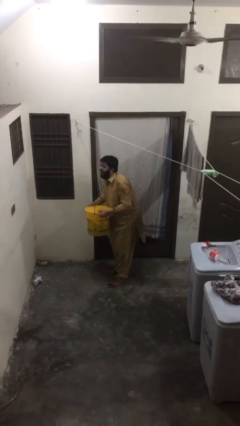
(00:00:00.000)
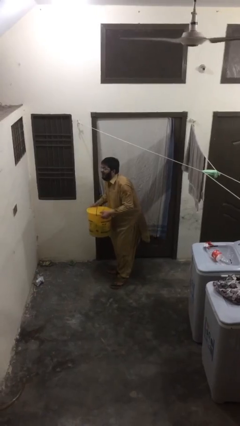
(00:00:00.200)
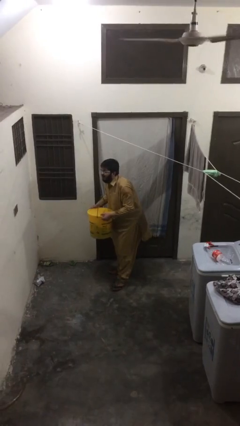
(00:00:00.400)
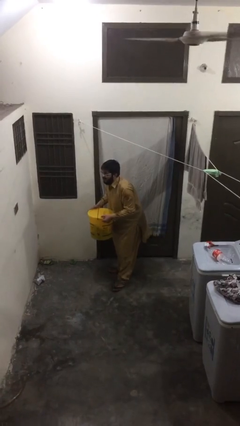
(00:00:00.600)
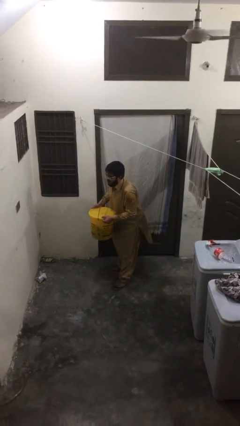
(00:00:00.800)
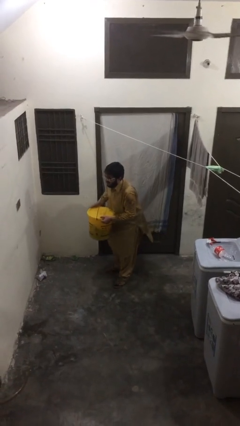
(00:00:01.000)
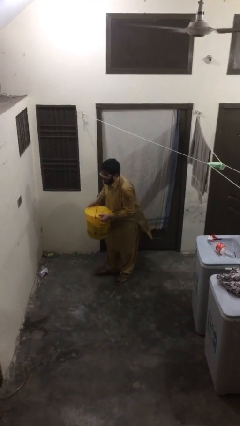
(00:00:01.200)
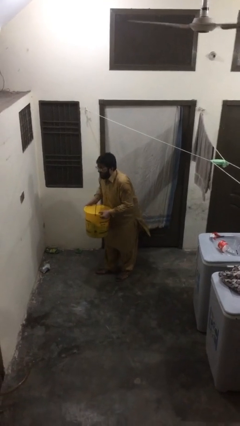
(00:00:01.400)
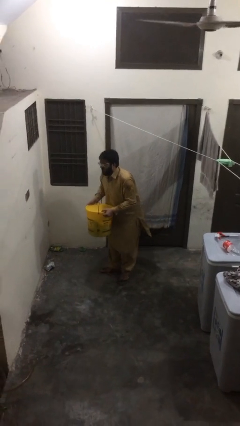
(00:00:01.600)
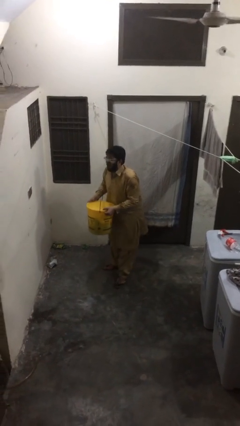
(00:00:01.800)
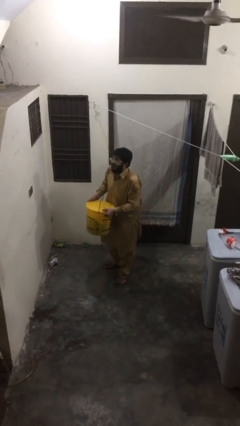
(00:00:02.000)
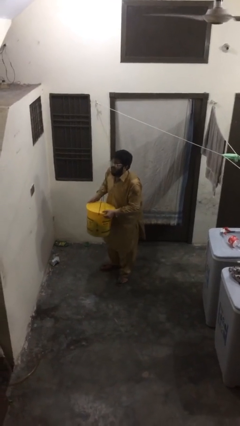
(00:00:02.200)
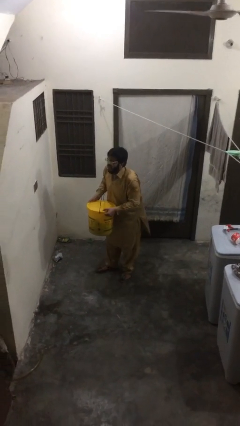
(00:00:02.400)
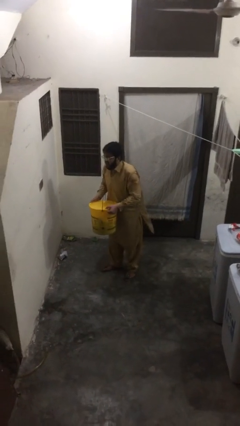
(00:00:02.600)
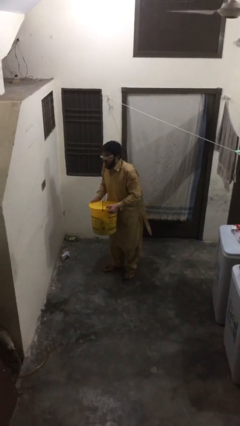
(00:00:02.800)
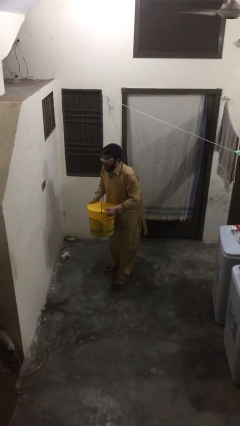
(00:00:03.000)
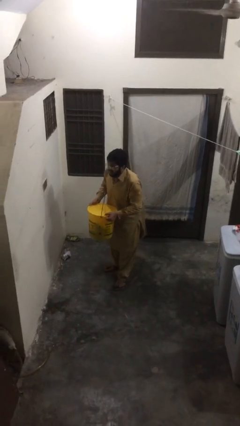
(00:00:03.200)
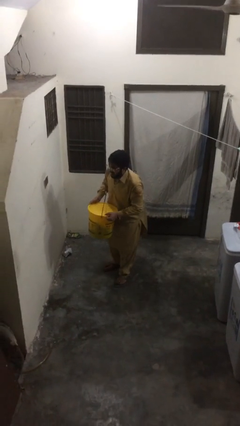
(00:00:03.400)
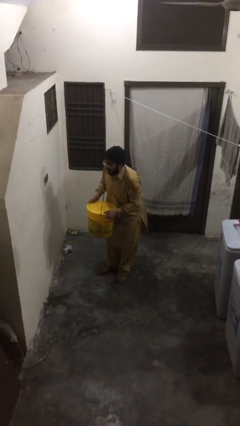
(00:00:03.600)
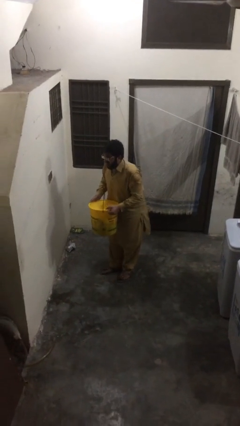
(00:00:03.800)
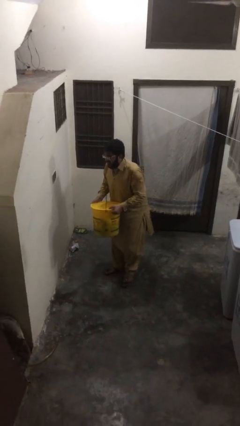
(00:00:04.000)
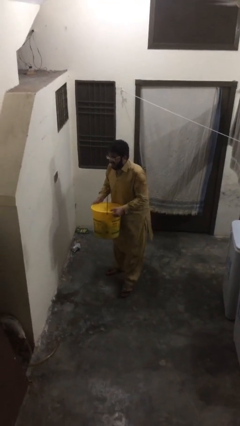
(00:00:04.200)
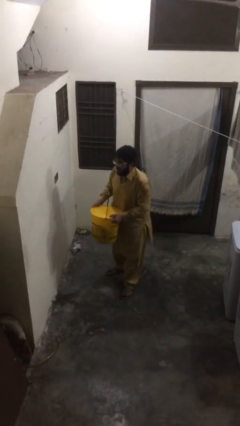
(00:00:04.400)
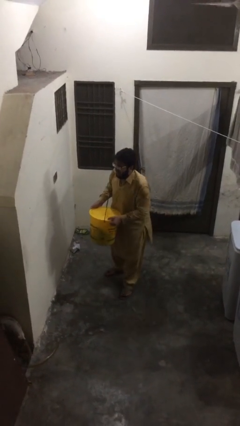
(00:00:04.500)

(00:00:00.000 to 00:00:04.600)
person carries heavy object

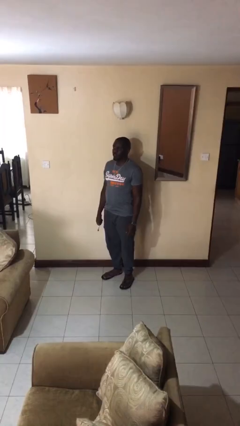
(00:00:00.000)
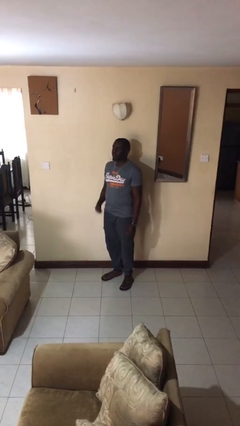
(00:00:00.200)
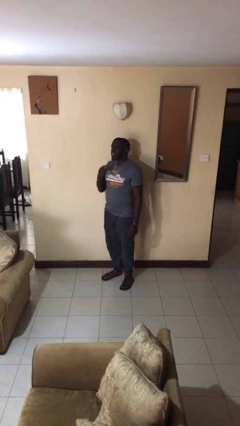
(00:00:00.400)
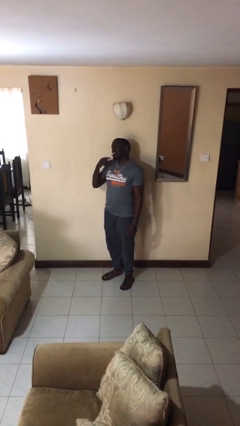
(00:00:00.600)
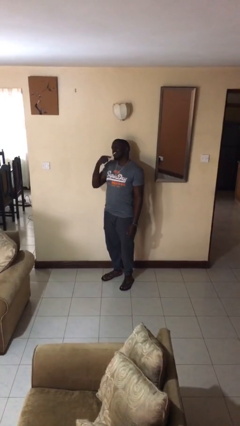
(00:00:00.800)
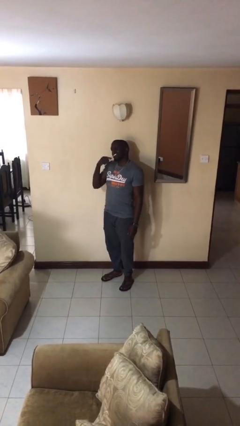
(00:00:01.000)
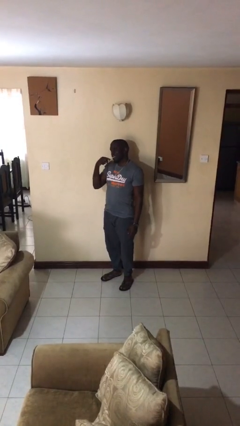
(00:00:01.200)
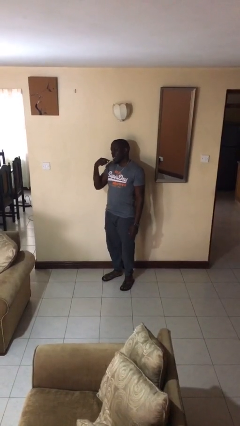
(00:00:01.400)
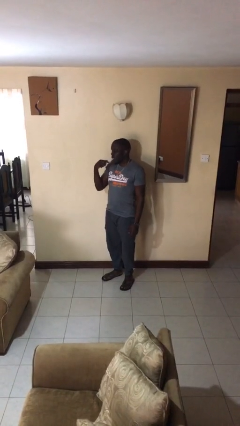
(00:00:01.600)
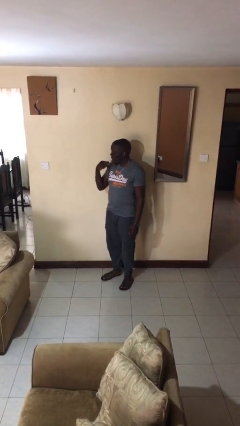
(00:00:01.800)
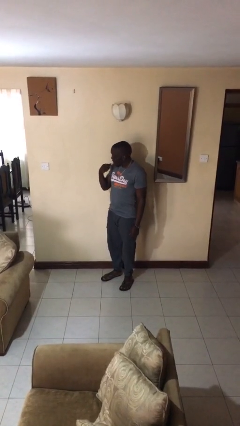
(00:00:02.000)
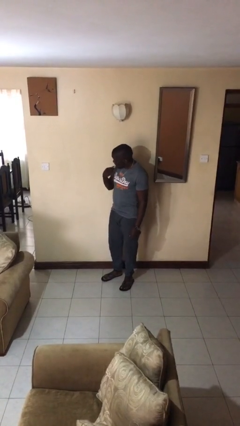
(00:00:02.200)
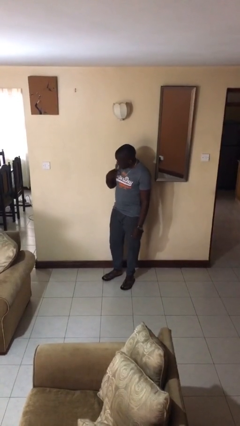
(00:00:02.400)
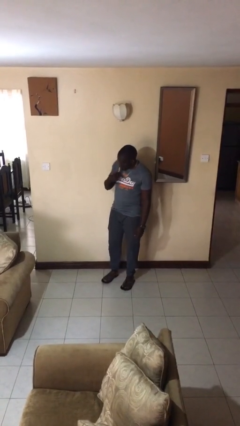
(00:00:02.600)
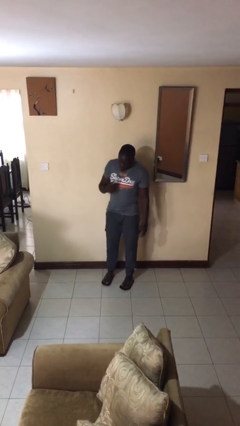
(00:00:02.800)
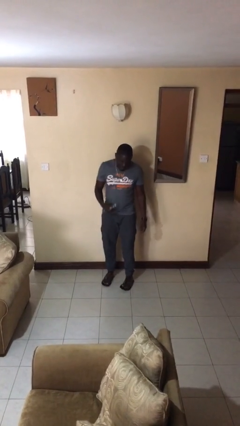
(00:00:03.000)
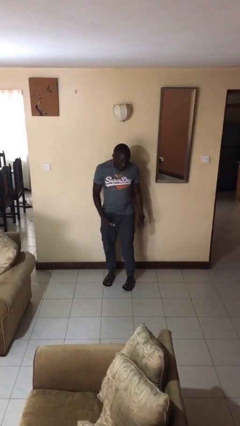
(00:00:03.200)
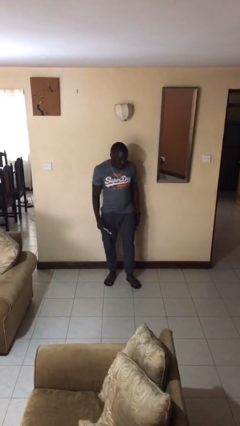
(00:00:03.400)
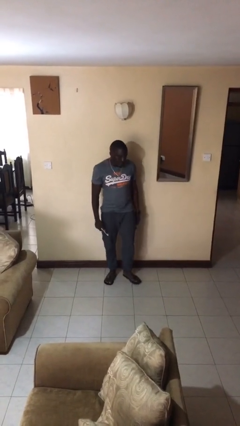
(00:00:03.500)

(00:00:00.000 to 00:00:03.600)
person brushes teeth

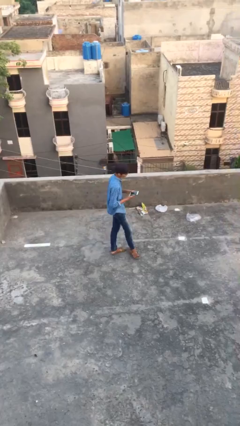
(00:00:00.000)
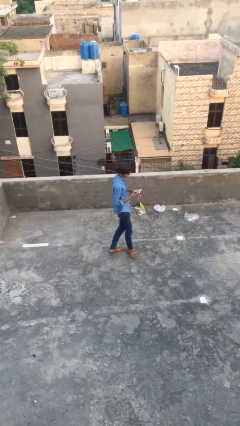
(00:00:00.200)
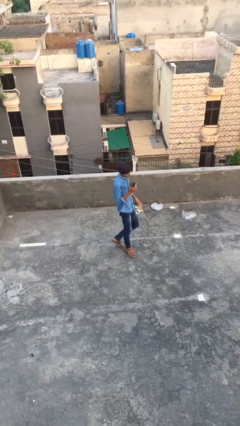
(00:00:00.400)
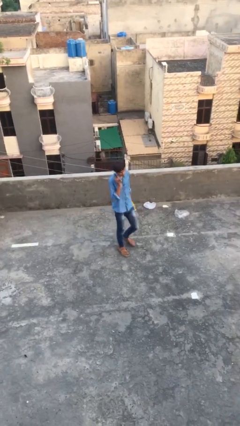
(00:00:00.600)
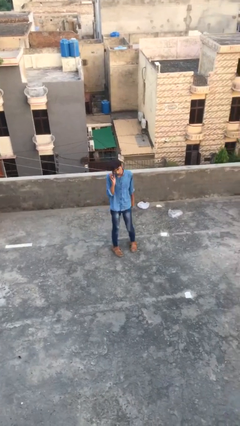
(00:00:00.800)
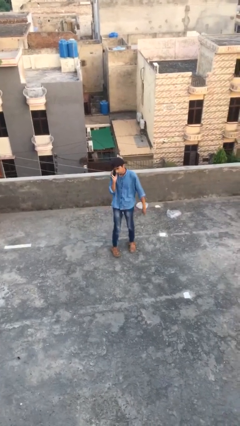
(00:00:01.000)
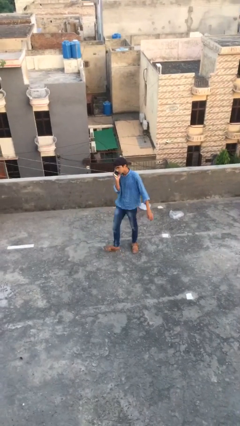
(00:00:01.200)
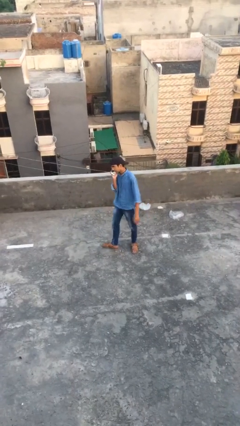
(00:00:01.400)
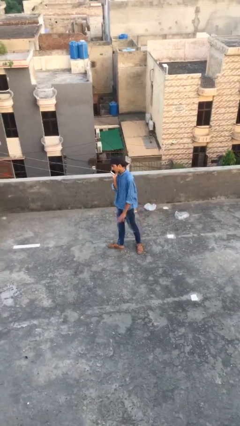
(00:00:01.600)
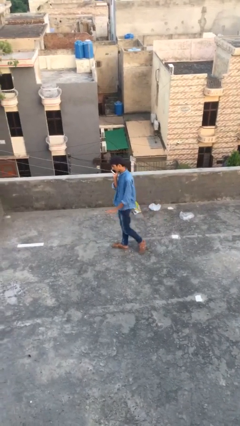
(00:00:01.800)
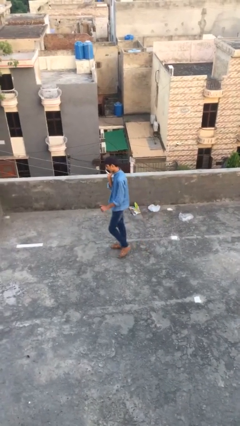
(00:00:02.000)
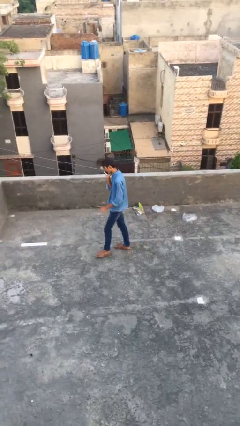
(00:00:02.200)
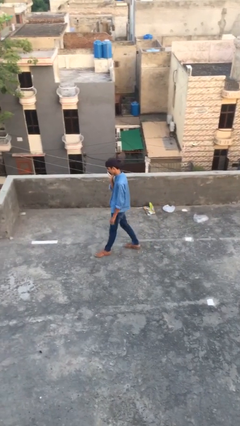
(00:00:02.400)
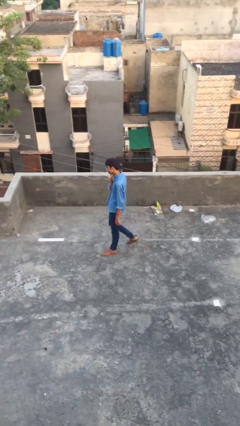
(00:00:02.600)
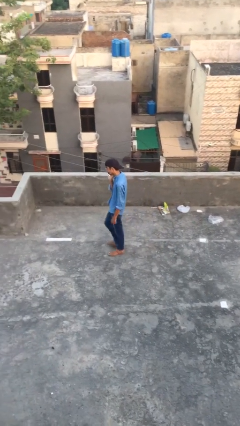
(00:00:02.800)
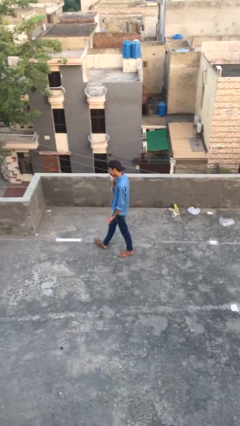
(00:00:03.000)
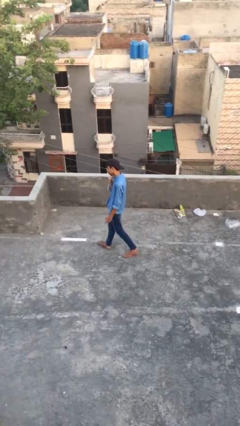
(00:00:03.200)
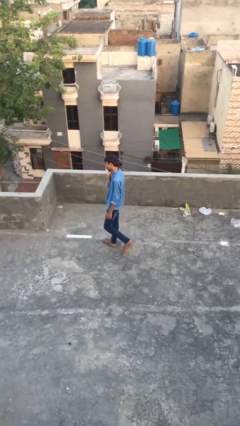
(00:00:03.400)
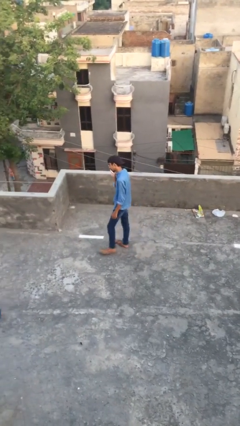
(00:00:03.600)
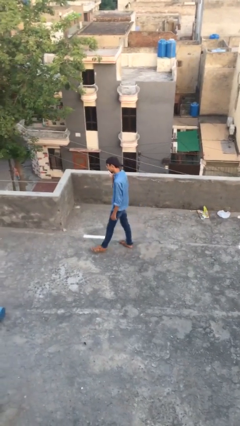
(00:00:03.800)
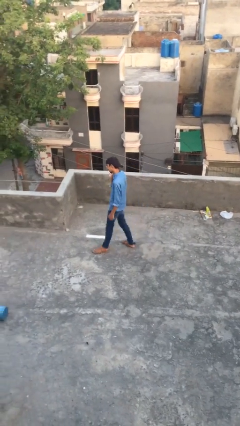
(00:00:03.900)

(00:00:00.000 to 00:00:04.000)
person talks on phone

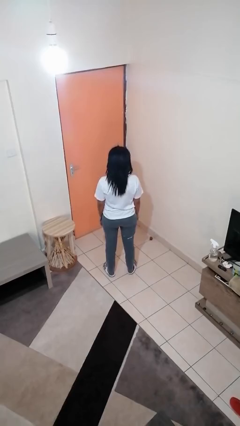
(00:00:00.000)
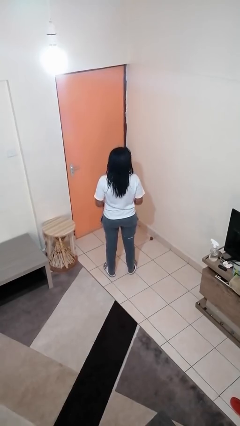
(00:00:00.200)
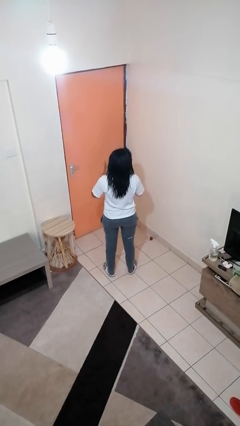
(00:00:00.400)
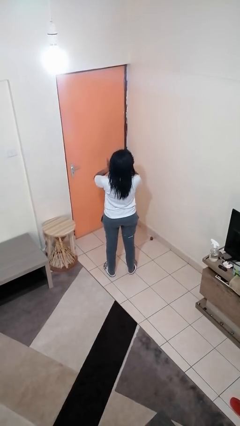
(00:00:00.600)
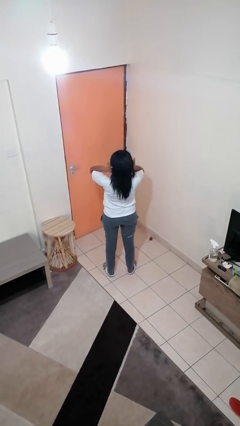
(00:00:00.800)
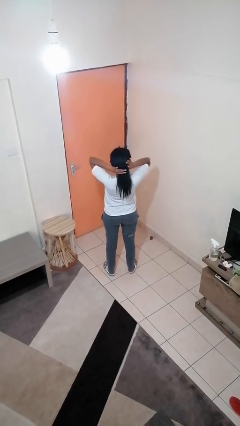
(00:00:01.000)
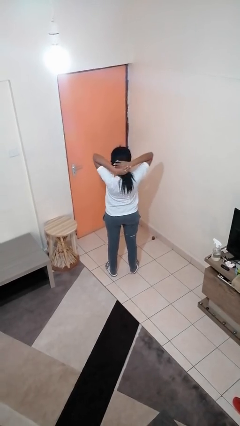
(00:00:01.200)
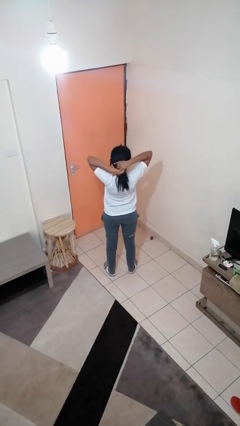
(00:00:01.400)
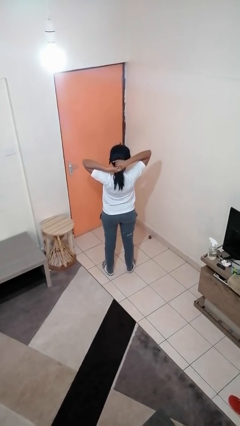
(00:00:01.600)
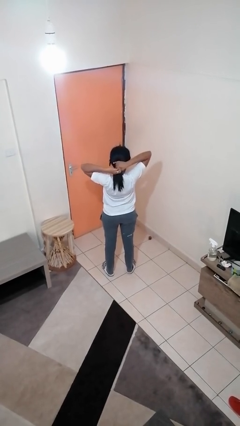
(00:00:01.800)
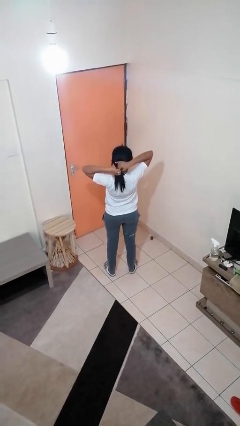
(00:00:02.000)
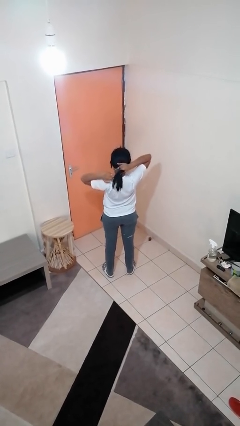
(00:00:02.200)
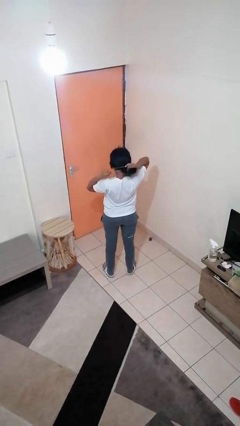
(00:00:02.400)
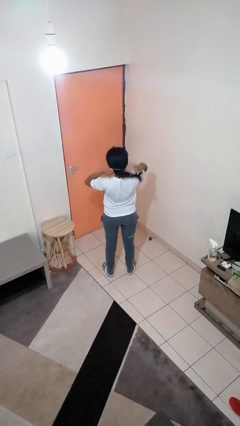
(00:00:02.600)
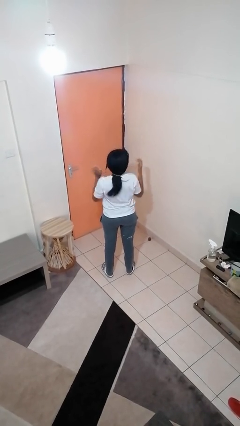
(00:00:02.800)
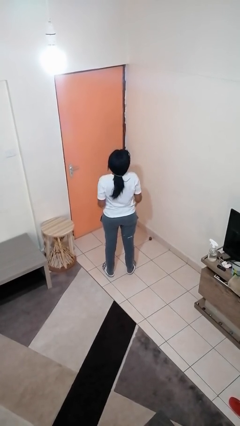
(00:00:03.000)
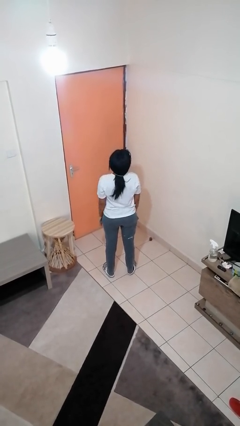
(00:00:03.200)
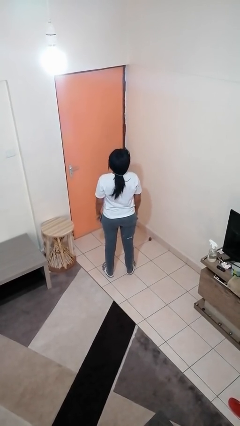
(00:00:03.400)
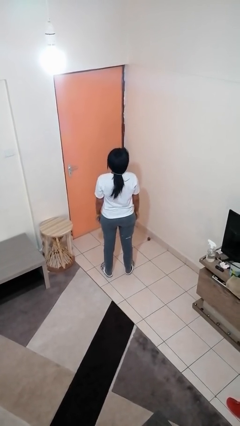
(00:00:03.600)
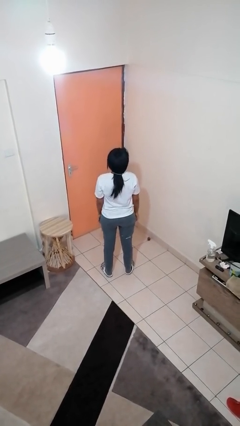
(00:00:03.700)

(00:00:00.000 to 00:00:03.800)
person puts hair in ponytail

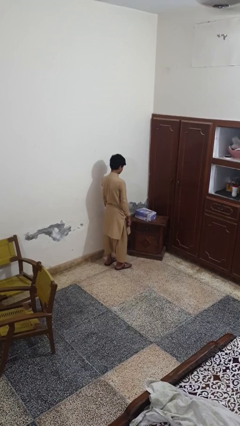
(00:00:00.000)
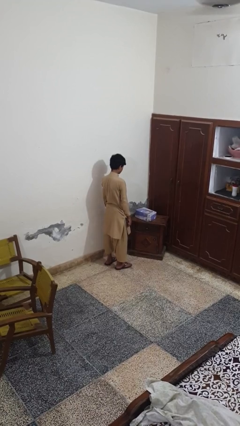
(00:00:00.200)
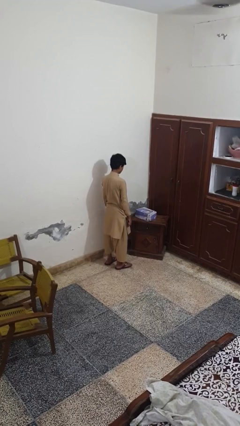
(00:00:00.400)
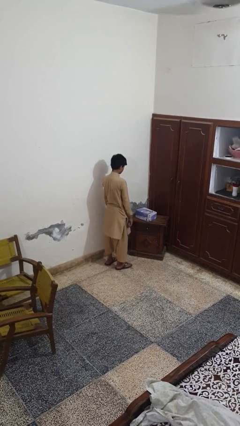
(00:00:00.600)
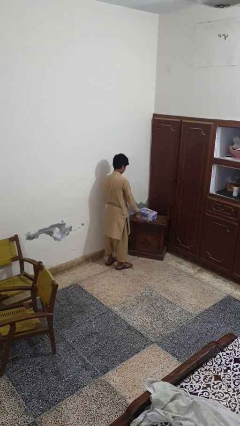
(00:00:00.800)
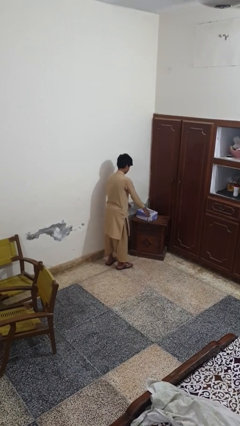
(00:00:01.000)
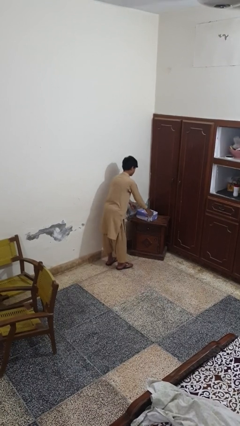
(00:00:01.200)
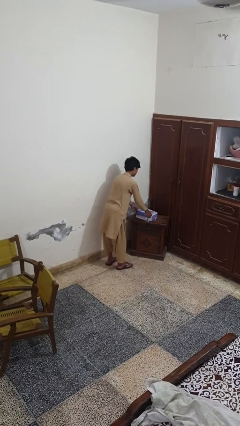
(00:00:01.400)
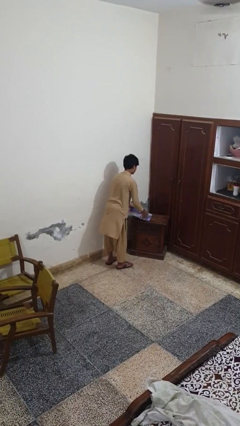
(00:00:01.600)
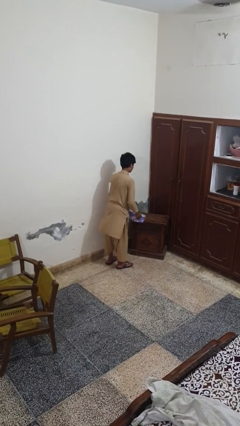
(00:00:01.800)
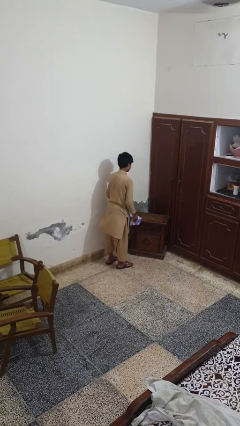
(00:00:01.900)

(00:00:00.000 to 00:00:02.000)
person picks up object from table
